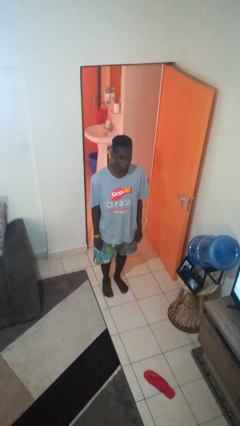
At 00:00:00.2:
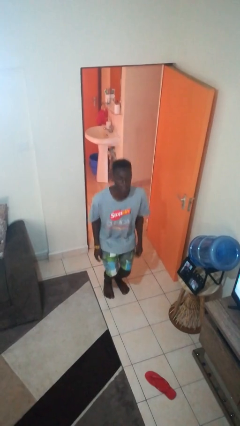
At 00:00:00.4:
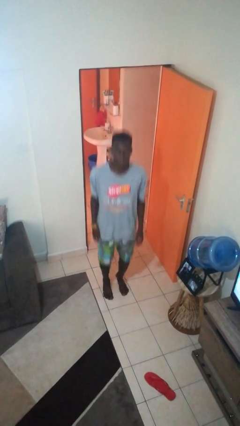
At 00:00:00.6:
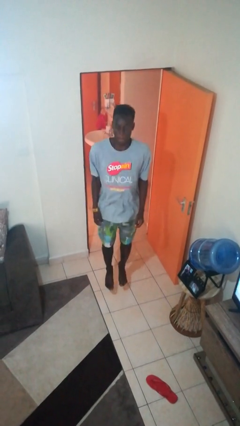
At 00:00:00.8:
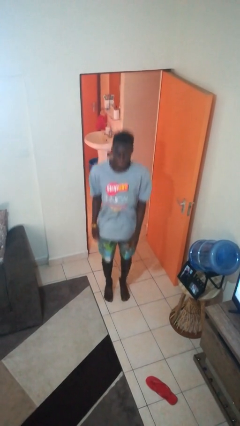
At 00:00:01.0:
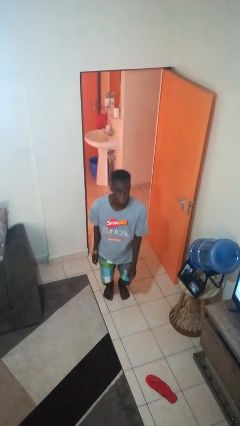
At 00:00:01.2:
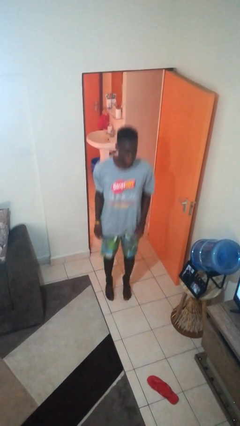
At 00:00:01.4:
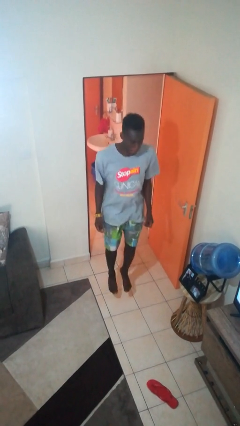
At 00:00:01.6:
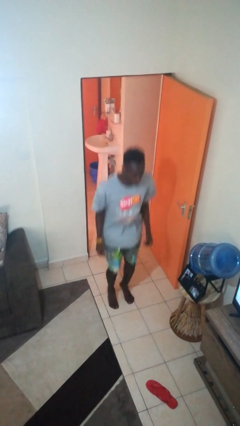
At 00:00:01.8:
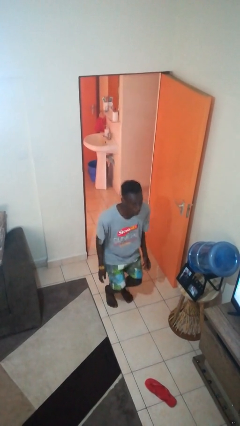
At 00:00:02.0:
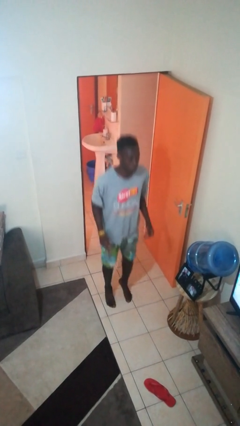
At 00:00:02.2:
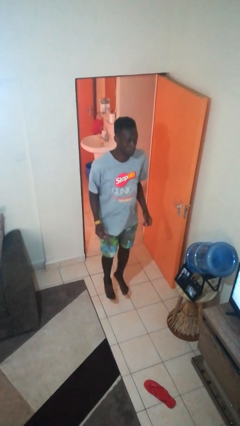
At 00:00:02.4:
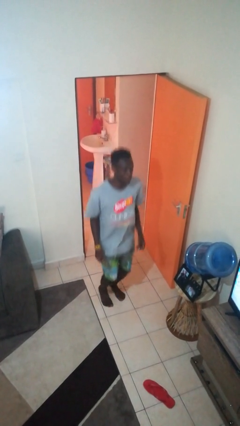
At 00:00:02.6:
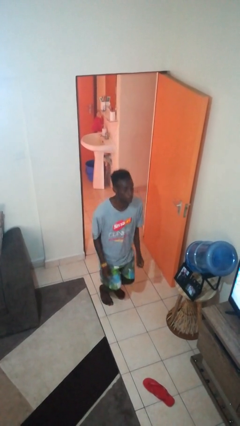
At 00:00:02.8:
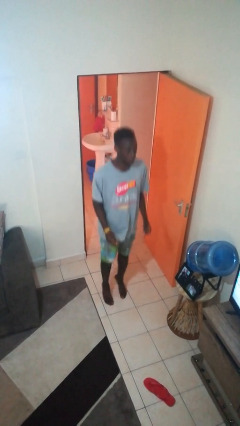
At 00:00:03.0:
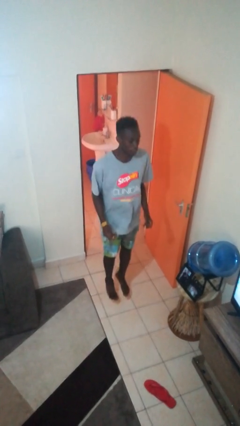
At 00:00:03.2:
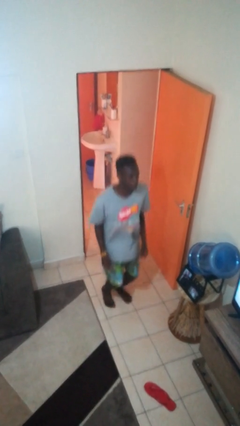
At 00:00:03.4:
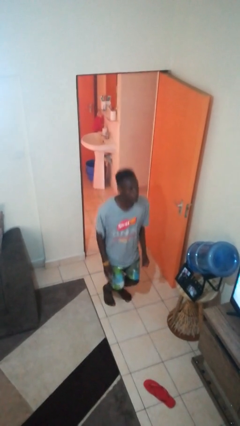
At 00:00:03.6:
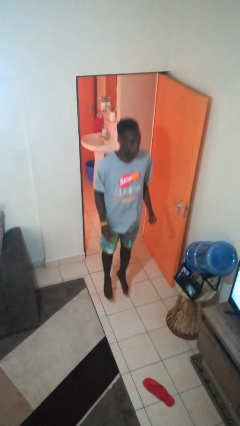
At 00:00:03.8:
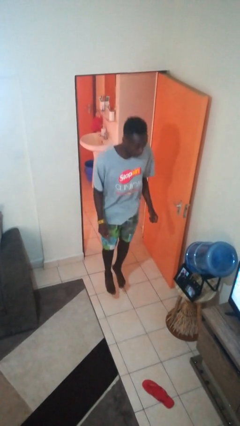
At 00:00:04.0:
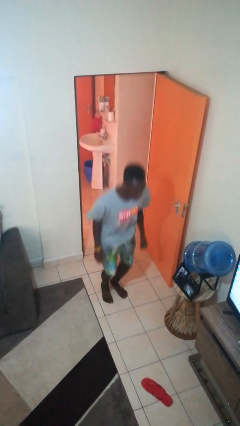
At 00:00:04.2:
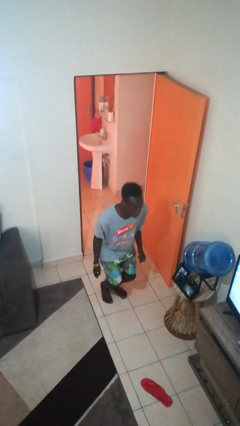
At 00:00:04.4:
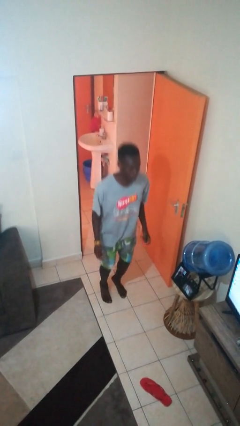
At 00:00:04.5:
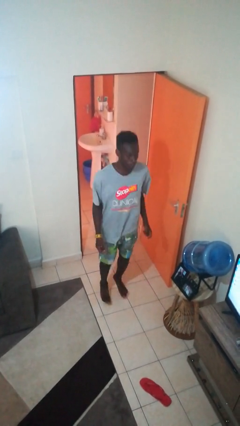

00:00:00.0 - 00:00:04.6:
person jumps

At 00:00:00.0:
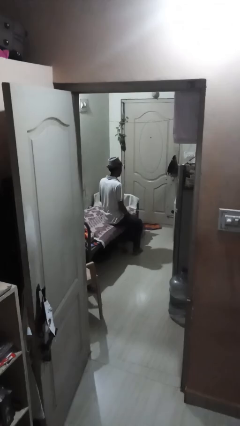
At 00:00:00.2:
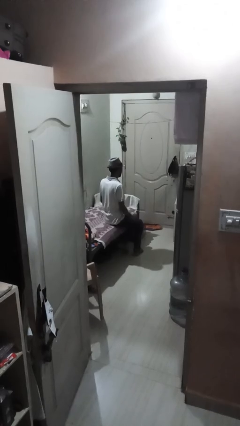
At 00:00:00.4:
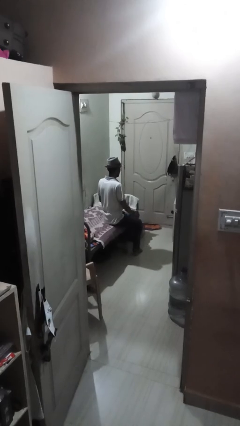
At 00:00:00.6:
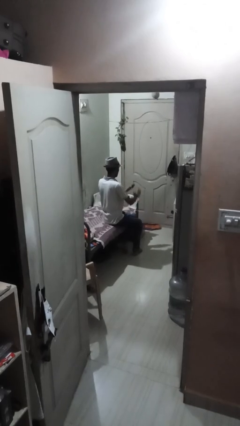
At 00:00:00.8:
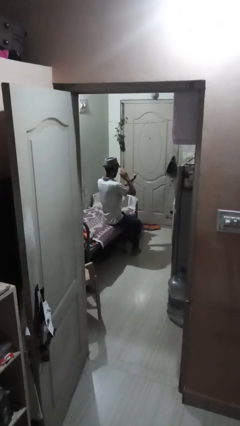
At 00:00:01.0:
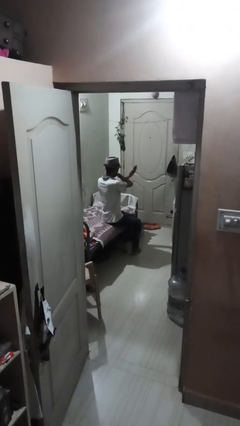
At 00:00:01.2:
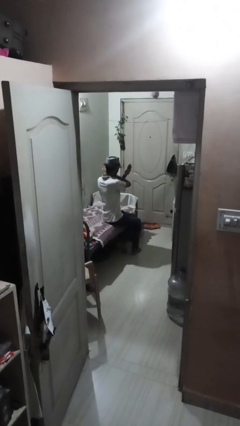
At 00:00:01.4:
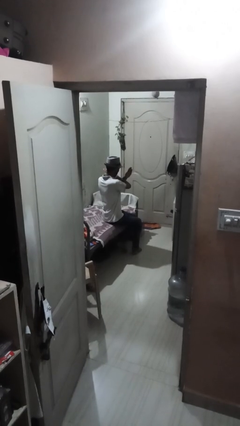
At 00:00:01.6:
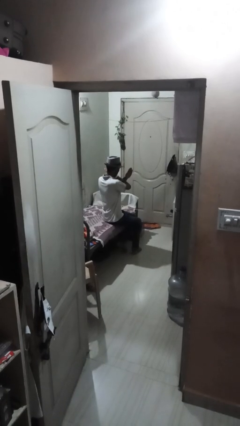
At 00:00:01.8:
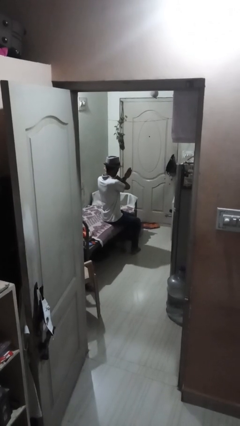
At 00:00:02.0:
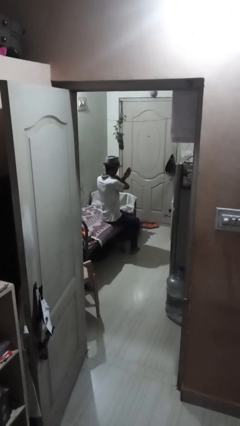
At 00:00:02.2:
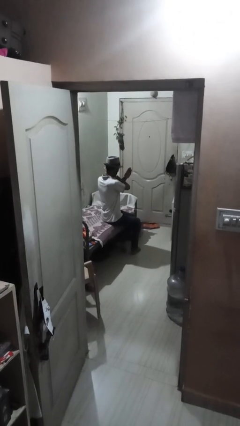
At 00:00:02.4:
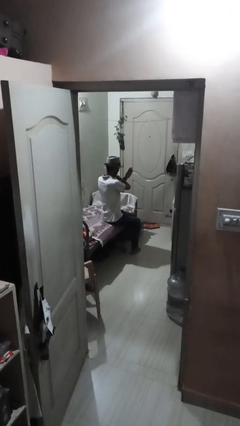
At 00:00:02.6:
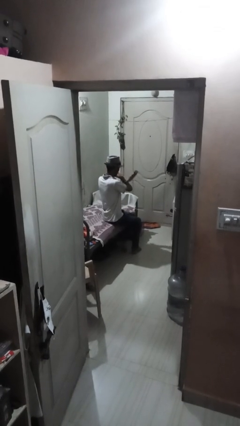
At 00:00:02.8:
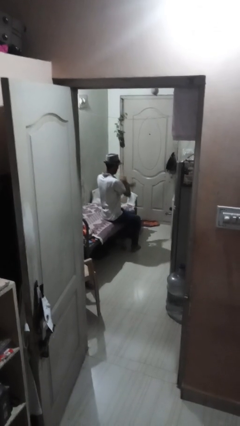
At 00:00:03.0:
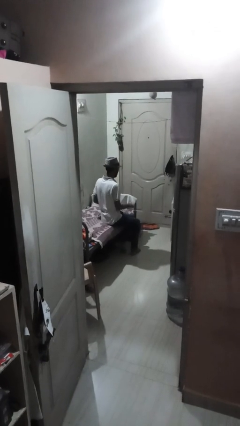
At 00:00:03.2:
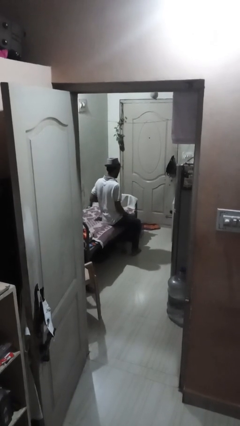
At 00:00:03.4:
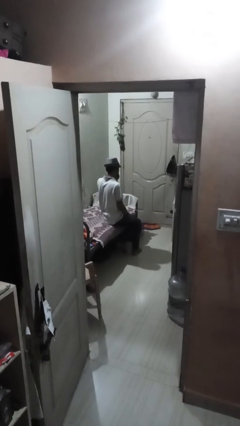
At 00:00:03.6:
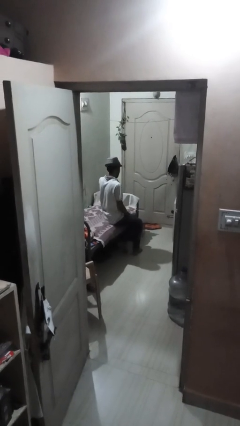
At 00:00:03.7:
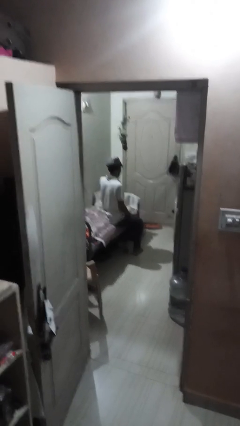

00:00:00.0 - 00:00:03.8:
person gestures arms x

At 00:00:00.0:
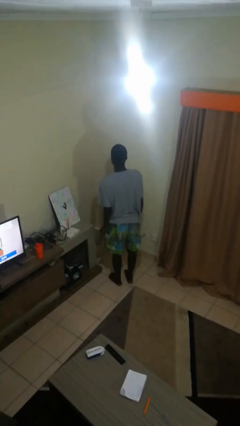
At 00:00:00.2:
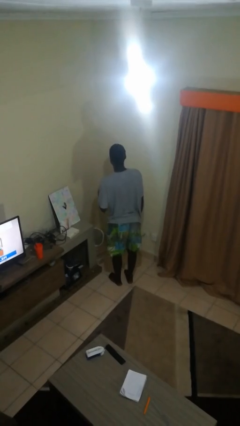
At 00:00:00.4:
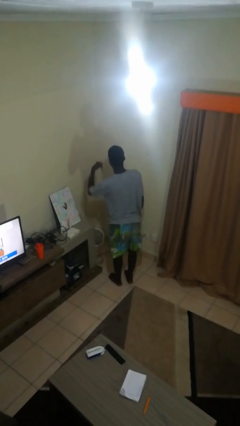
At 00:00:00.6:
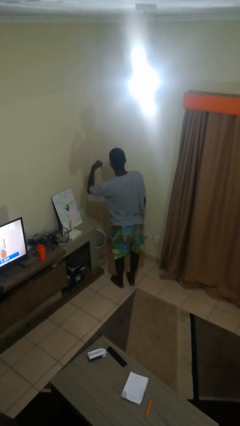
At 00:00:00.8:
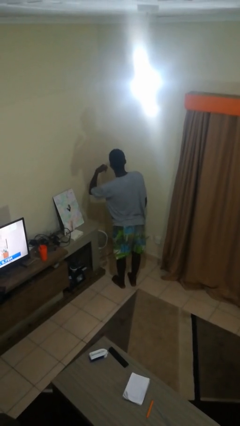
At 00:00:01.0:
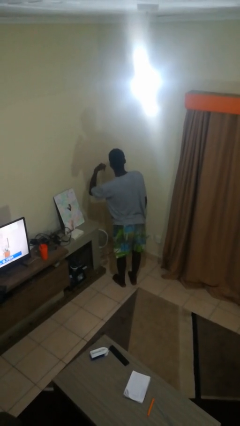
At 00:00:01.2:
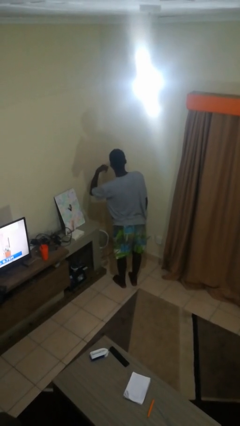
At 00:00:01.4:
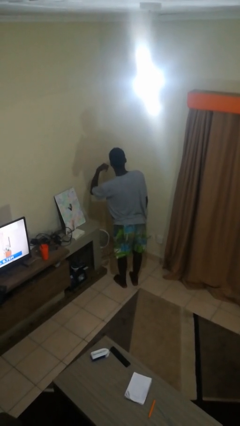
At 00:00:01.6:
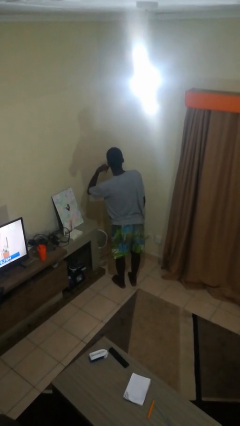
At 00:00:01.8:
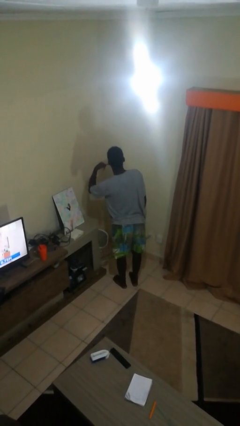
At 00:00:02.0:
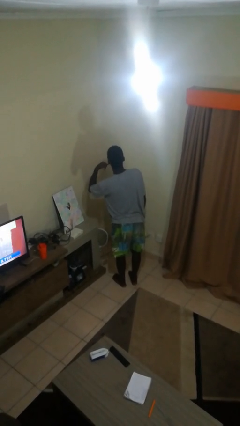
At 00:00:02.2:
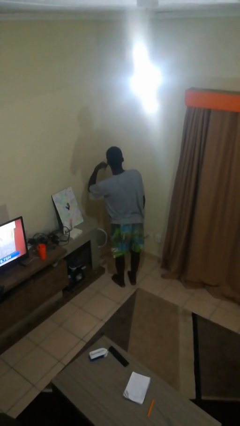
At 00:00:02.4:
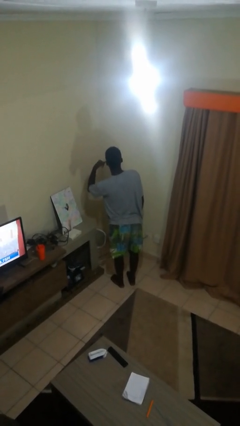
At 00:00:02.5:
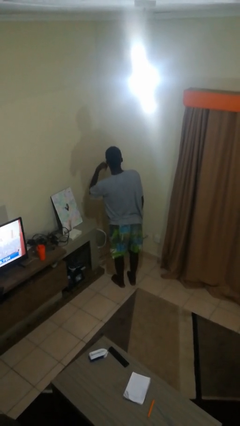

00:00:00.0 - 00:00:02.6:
person gestures call me

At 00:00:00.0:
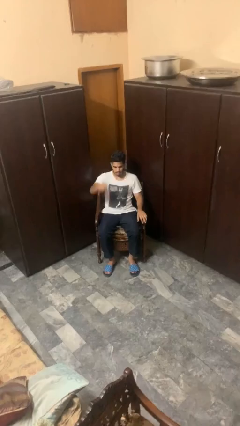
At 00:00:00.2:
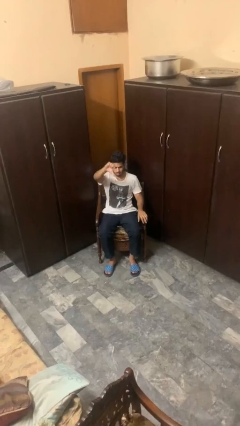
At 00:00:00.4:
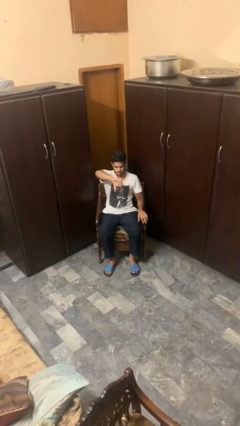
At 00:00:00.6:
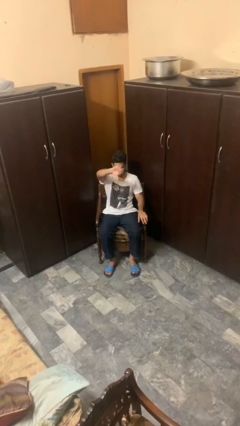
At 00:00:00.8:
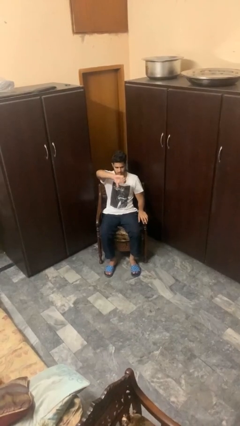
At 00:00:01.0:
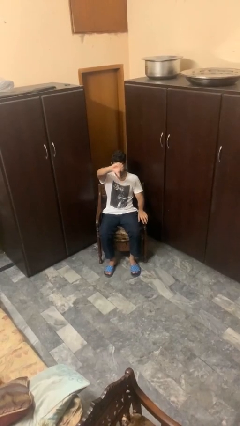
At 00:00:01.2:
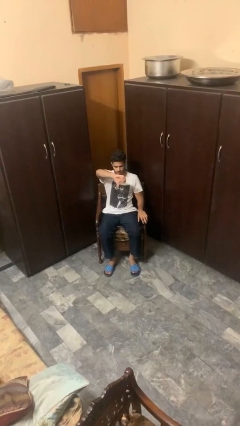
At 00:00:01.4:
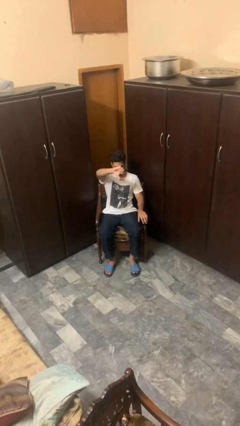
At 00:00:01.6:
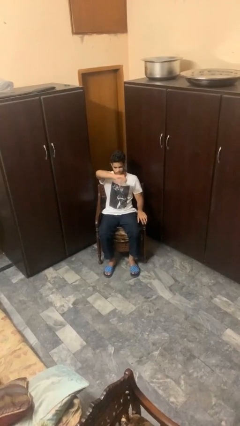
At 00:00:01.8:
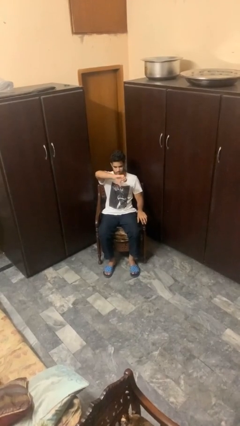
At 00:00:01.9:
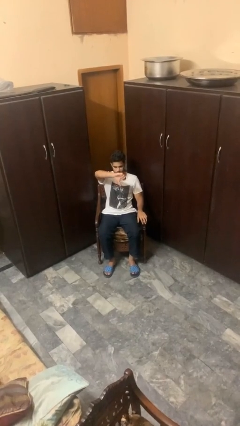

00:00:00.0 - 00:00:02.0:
person gestures thumbs down

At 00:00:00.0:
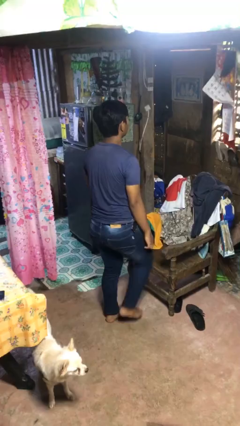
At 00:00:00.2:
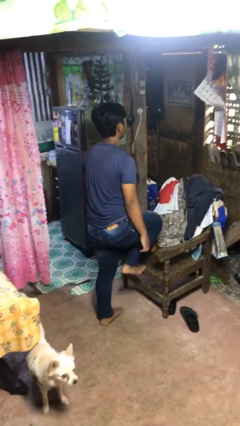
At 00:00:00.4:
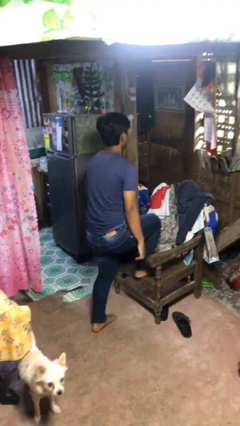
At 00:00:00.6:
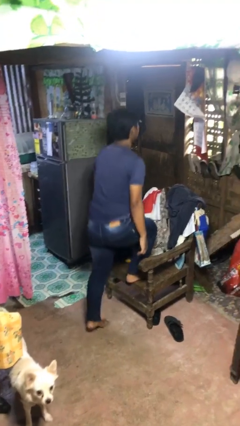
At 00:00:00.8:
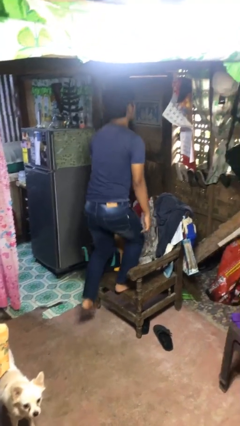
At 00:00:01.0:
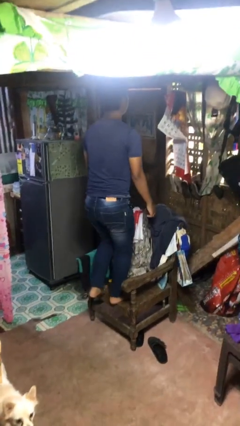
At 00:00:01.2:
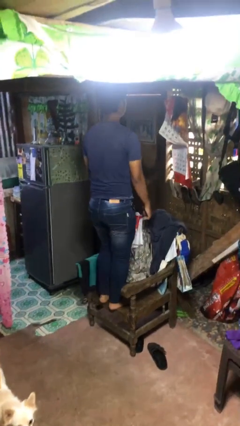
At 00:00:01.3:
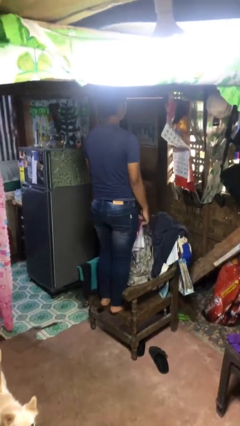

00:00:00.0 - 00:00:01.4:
person climbs on chair

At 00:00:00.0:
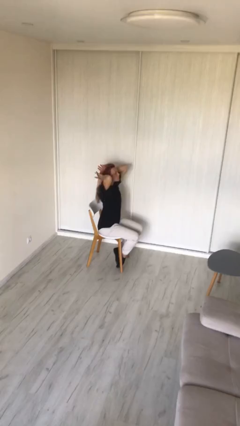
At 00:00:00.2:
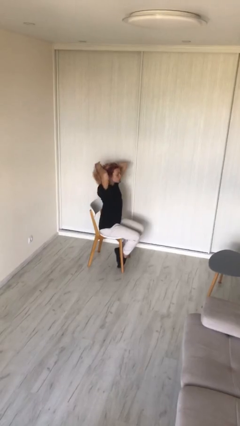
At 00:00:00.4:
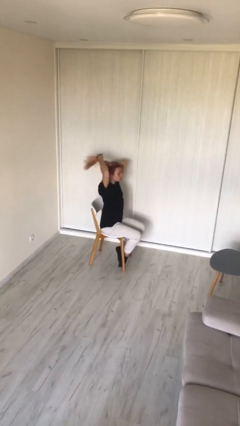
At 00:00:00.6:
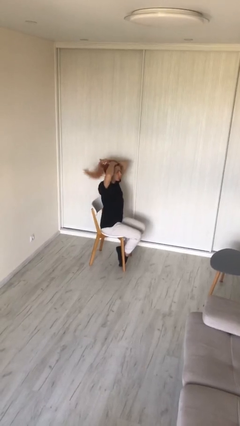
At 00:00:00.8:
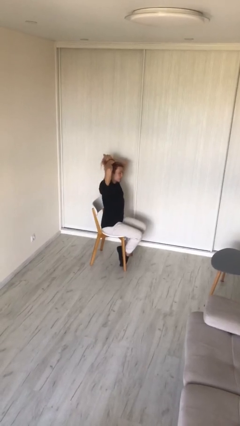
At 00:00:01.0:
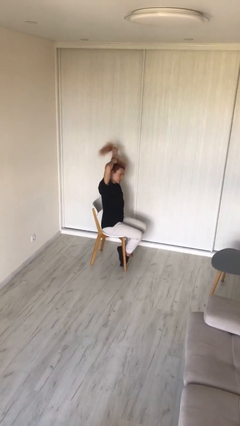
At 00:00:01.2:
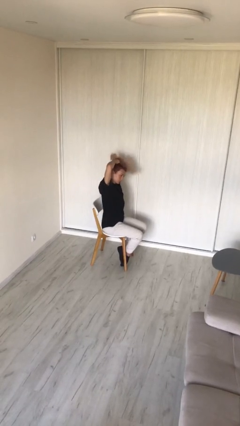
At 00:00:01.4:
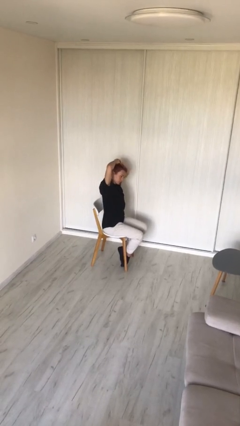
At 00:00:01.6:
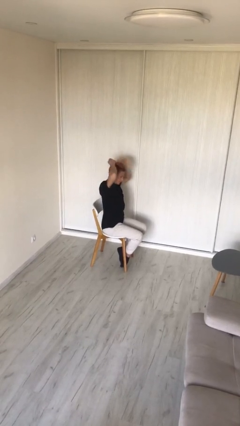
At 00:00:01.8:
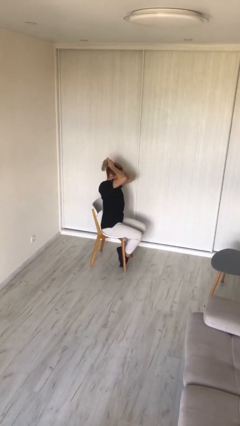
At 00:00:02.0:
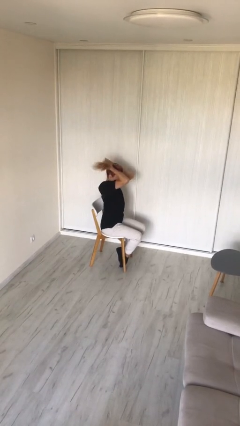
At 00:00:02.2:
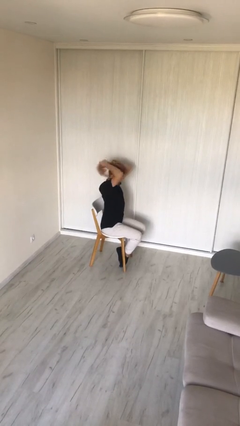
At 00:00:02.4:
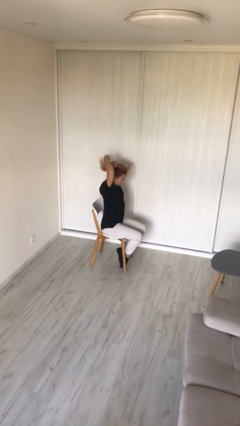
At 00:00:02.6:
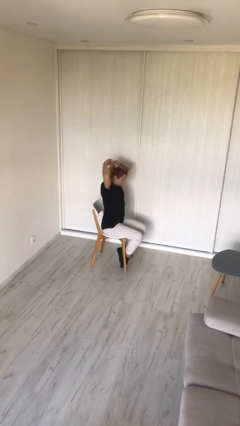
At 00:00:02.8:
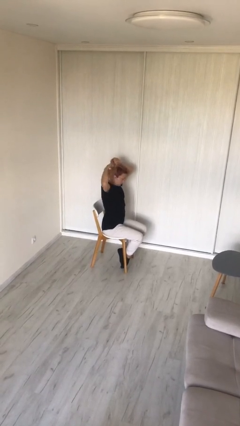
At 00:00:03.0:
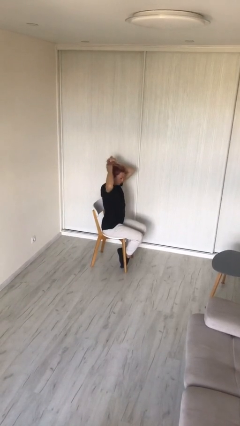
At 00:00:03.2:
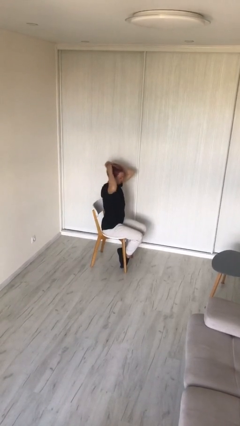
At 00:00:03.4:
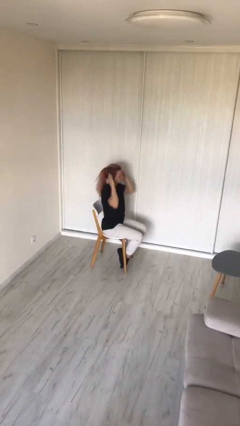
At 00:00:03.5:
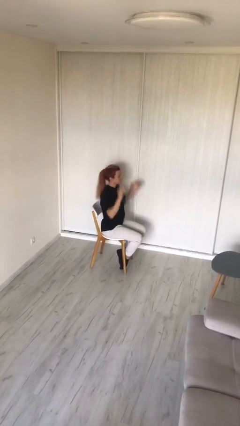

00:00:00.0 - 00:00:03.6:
person puts hair in ponytail
